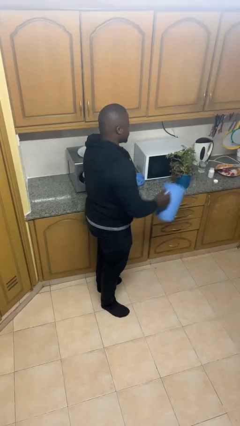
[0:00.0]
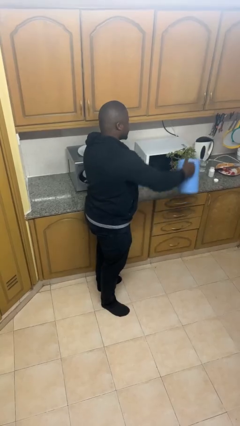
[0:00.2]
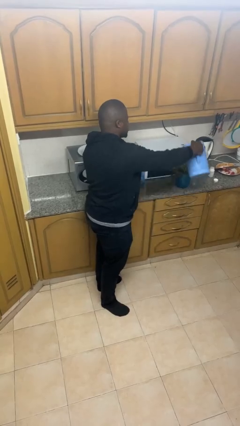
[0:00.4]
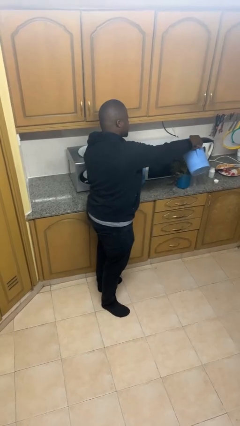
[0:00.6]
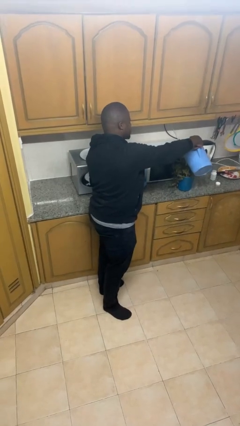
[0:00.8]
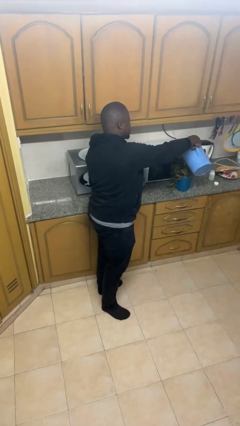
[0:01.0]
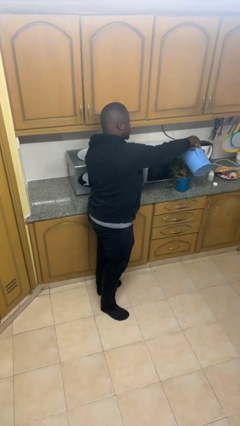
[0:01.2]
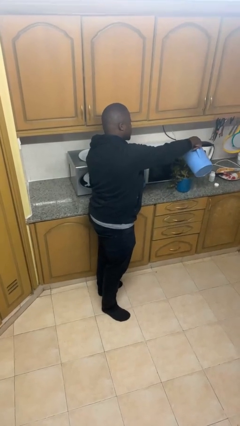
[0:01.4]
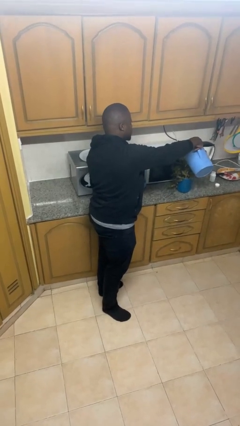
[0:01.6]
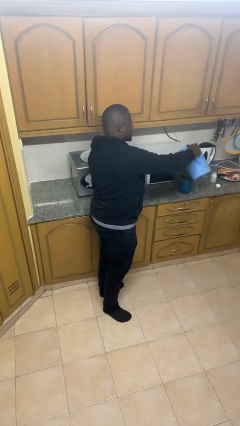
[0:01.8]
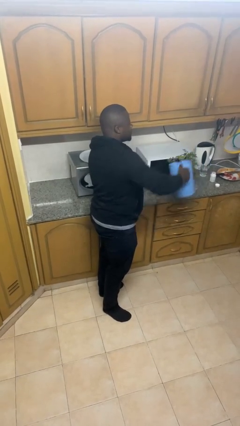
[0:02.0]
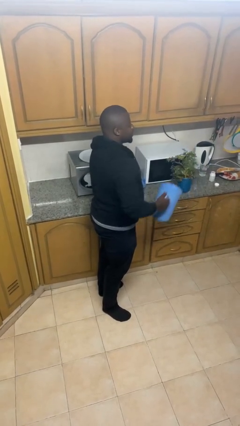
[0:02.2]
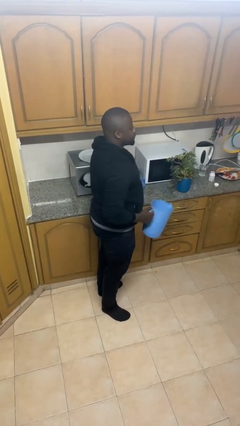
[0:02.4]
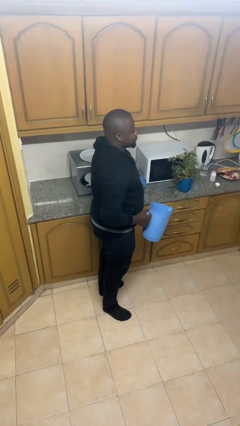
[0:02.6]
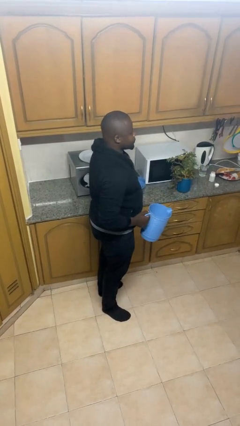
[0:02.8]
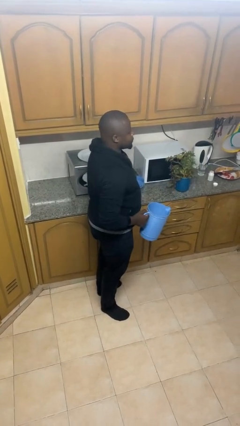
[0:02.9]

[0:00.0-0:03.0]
person waters houseplant

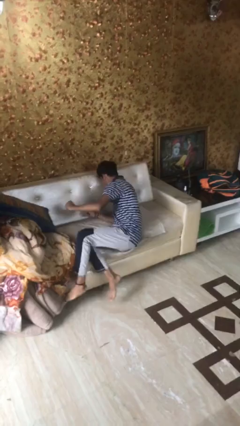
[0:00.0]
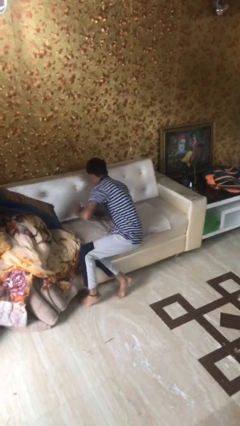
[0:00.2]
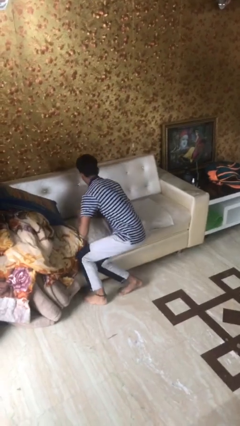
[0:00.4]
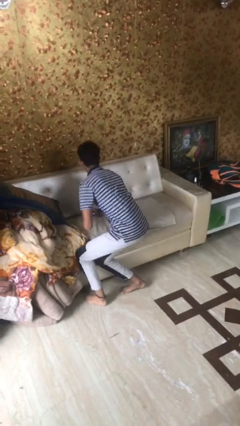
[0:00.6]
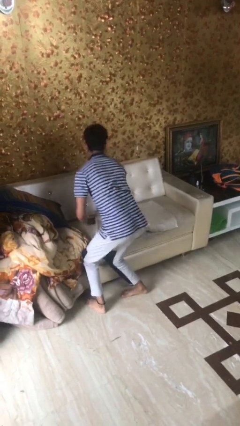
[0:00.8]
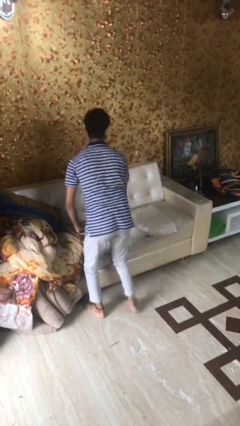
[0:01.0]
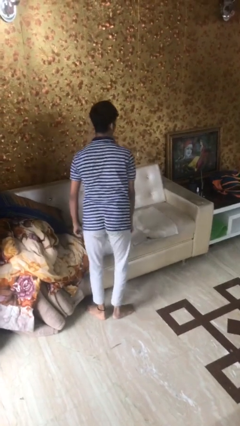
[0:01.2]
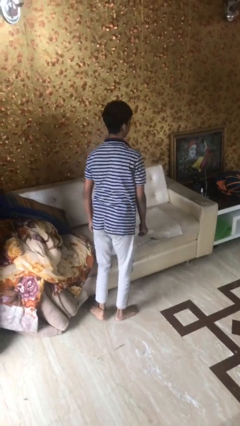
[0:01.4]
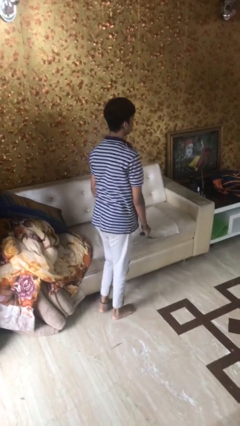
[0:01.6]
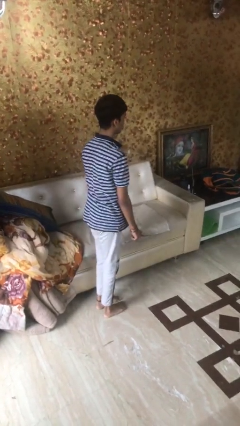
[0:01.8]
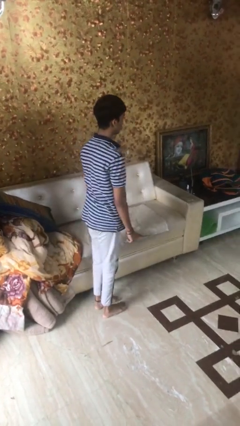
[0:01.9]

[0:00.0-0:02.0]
person stands up

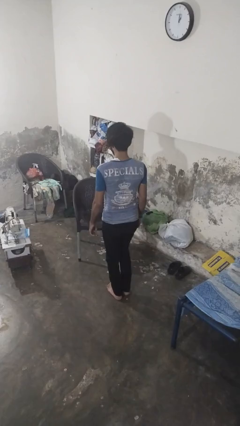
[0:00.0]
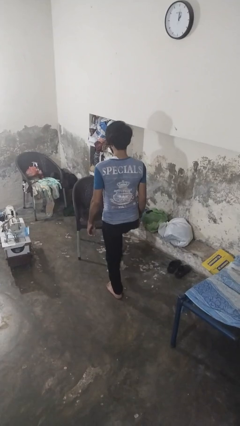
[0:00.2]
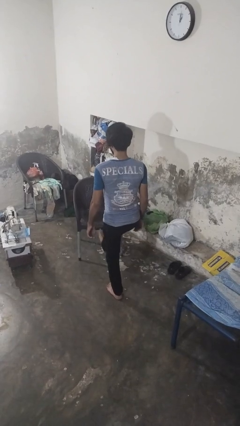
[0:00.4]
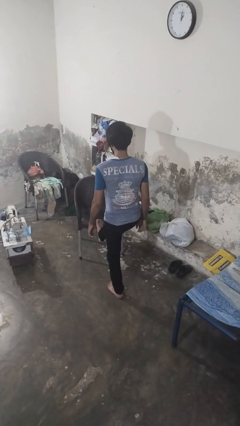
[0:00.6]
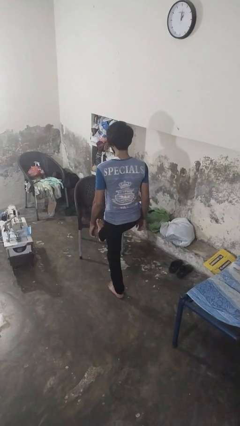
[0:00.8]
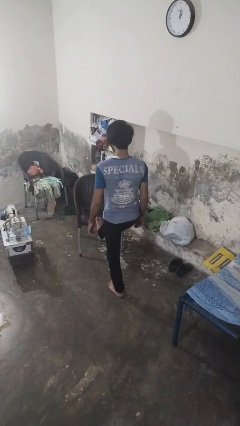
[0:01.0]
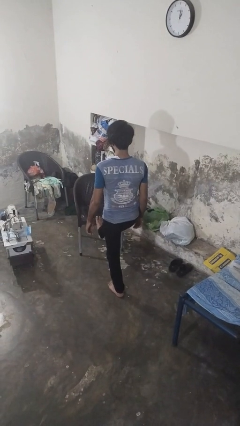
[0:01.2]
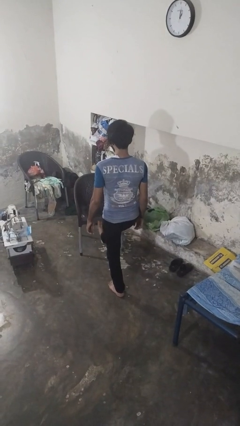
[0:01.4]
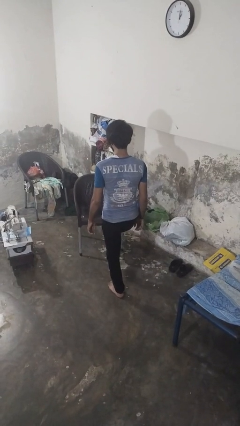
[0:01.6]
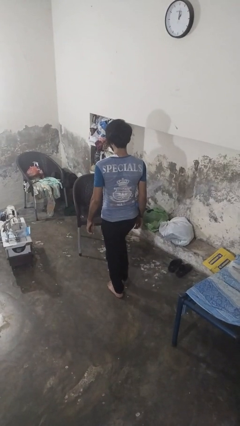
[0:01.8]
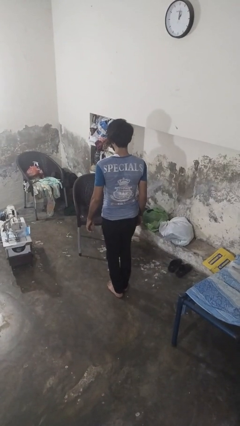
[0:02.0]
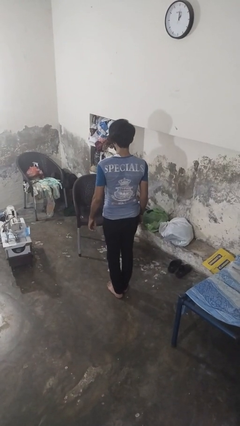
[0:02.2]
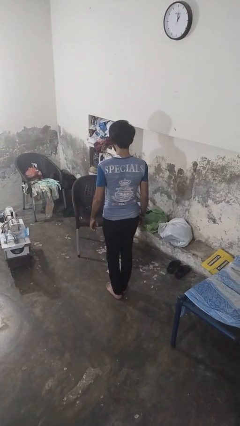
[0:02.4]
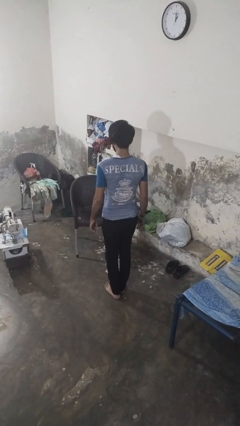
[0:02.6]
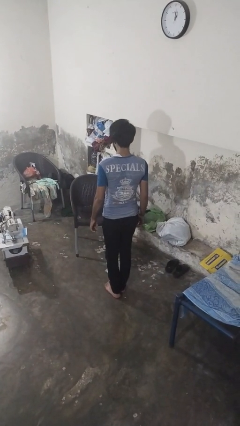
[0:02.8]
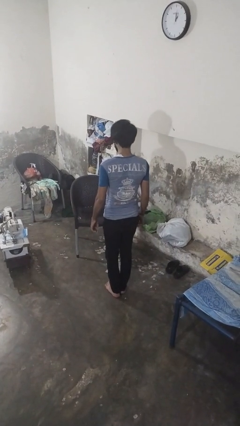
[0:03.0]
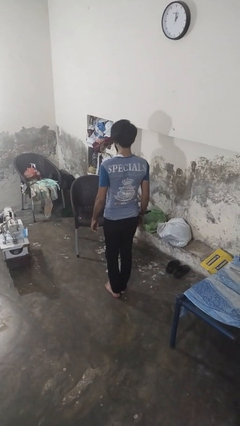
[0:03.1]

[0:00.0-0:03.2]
person stubs toe

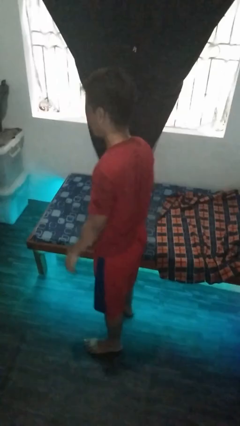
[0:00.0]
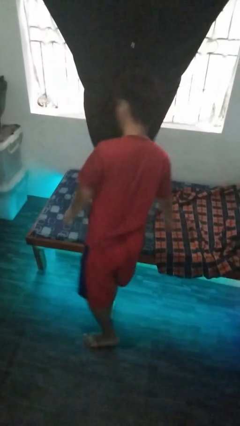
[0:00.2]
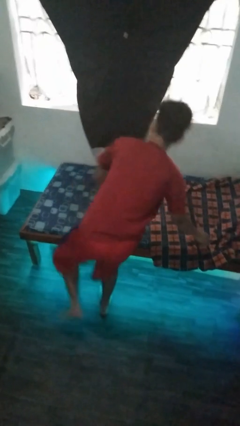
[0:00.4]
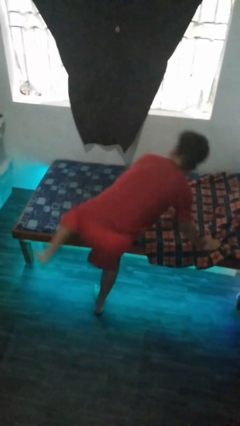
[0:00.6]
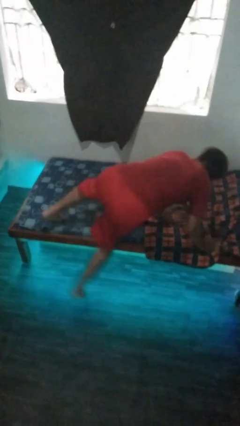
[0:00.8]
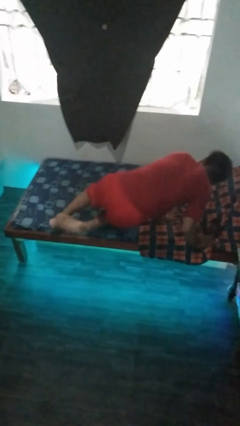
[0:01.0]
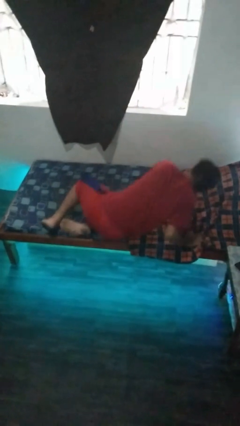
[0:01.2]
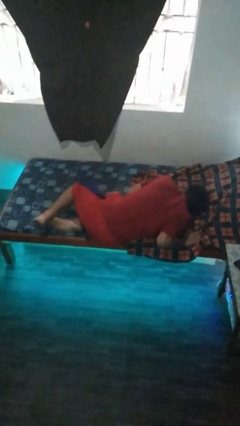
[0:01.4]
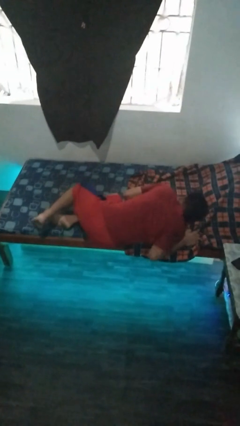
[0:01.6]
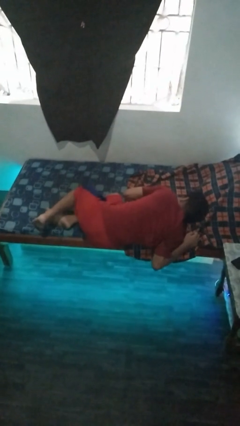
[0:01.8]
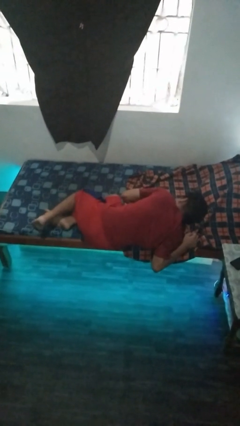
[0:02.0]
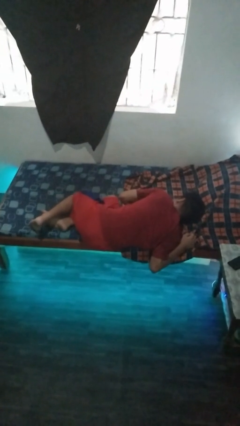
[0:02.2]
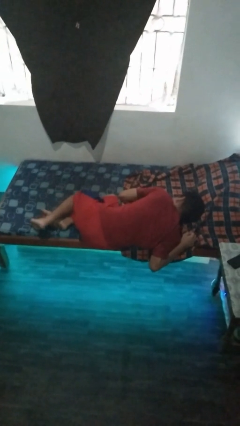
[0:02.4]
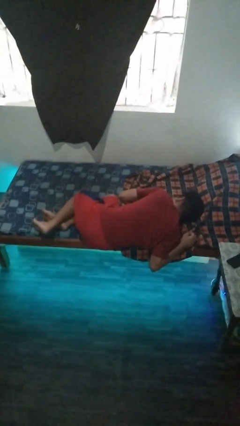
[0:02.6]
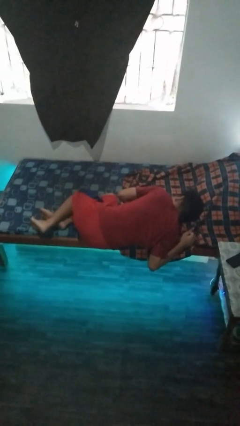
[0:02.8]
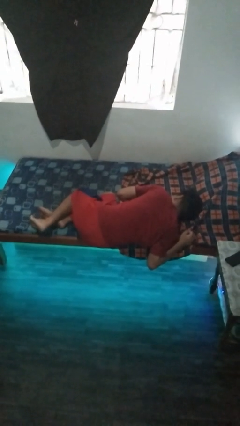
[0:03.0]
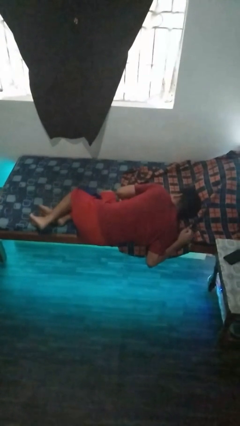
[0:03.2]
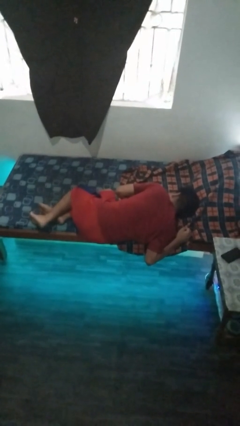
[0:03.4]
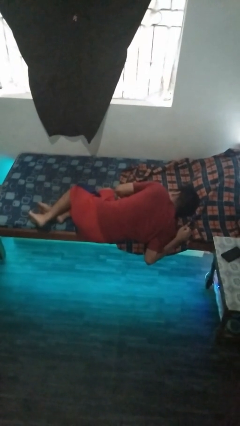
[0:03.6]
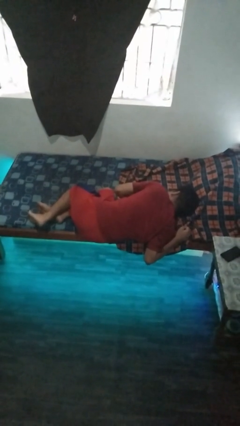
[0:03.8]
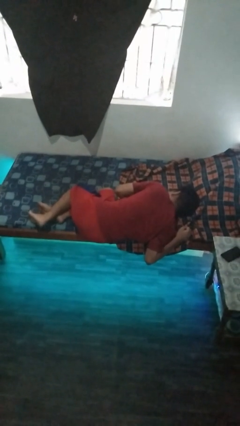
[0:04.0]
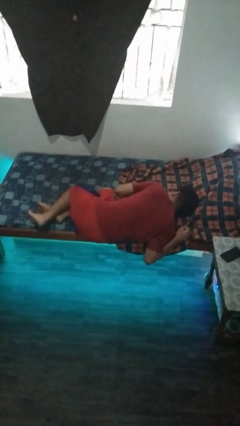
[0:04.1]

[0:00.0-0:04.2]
person lies down on bed

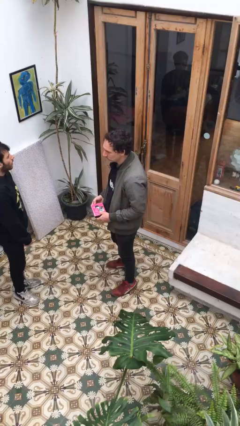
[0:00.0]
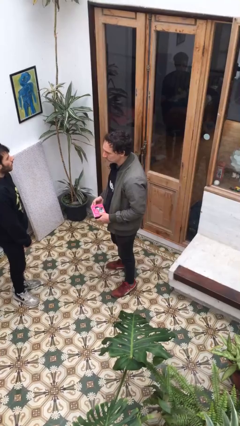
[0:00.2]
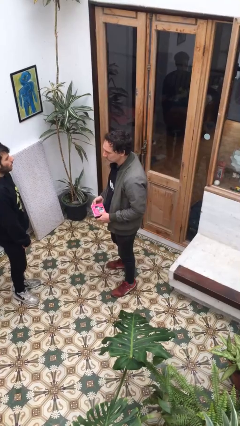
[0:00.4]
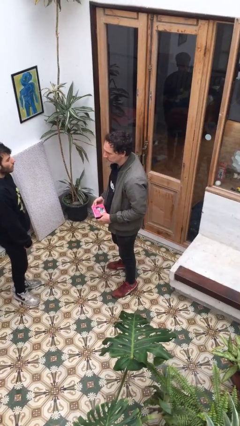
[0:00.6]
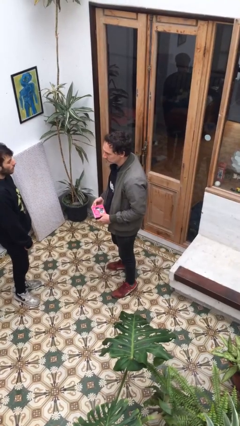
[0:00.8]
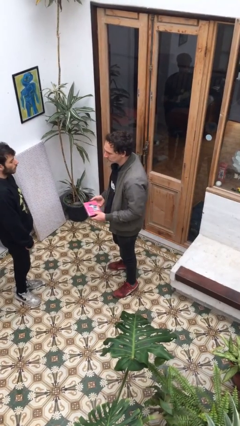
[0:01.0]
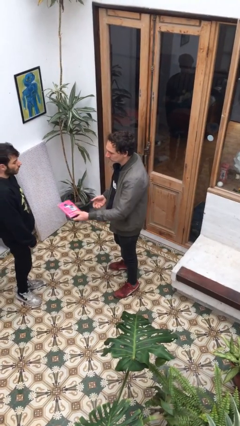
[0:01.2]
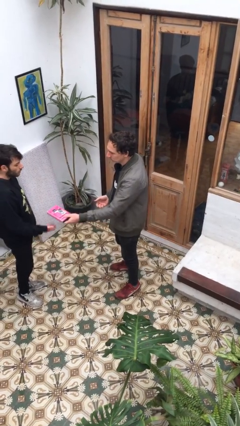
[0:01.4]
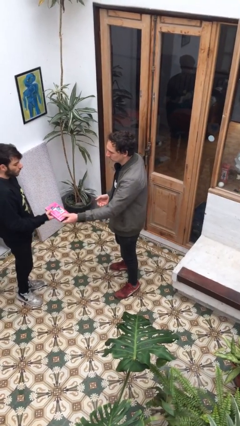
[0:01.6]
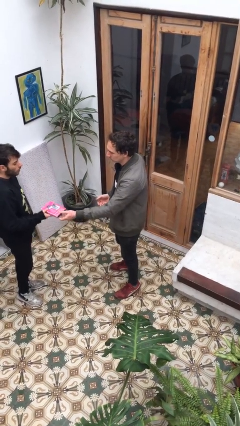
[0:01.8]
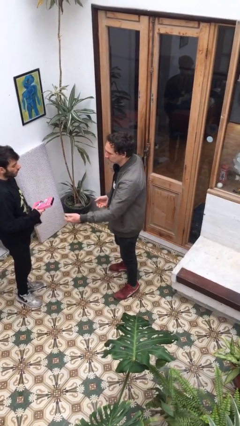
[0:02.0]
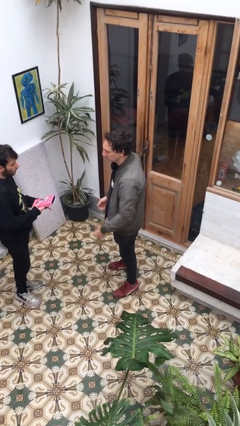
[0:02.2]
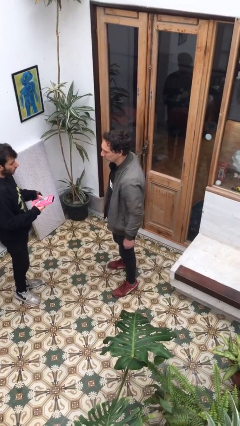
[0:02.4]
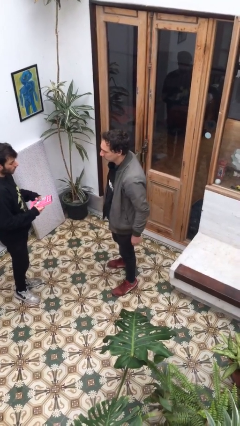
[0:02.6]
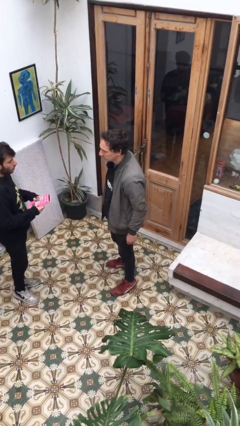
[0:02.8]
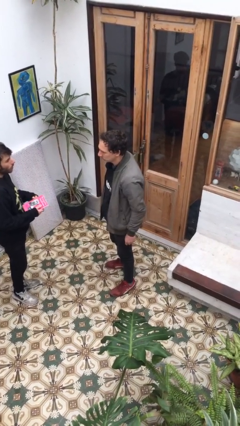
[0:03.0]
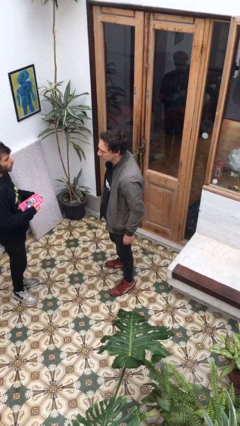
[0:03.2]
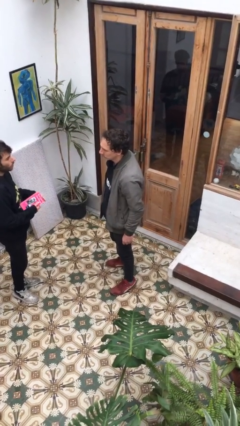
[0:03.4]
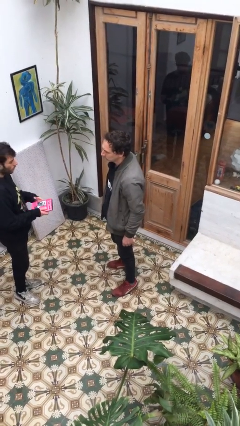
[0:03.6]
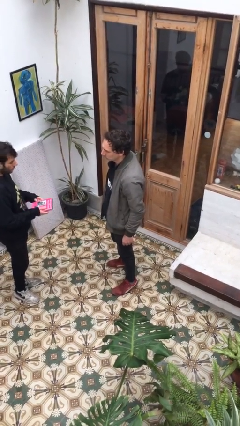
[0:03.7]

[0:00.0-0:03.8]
person transfers object to person

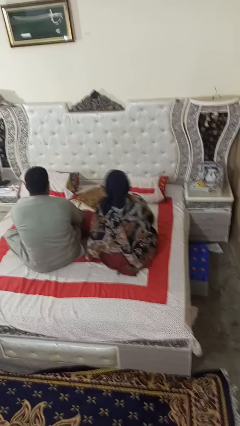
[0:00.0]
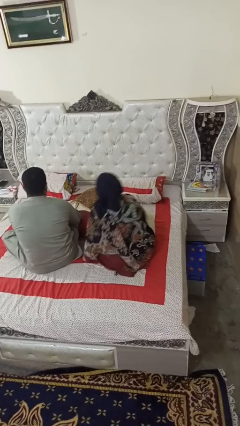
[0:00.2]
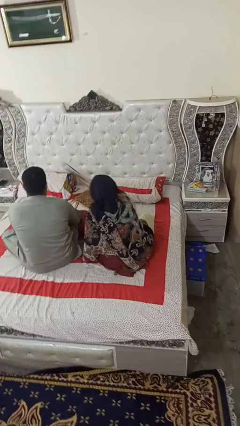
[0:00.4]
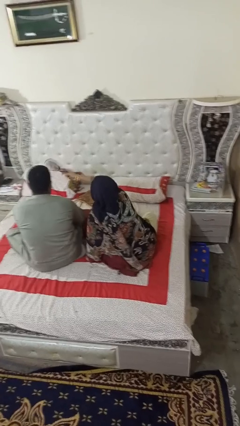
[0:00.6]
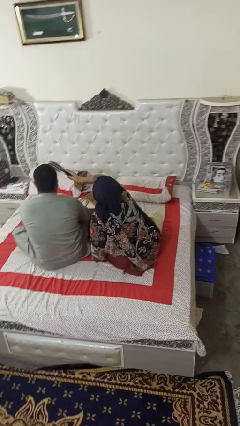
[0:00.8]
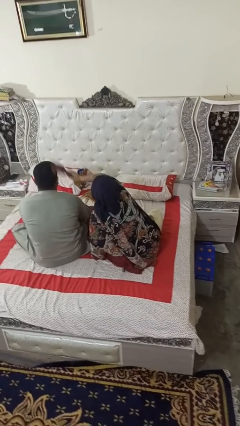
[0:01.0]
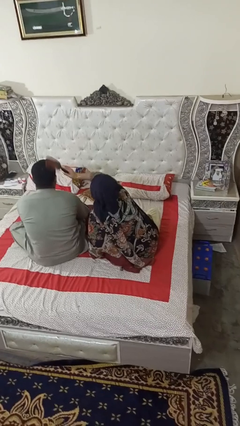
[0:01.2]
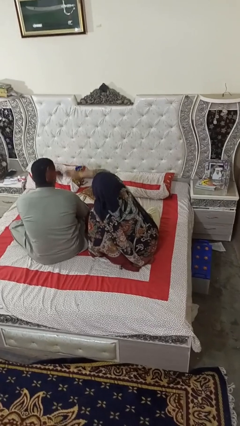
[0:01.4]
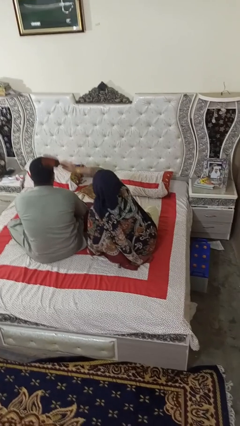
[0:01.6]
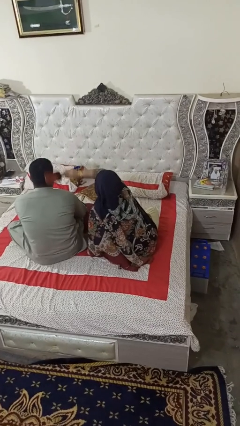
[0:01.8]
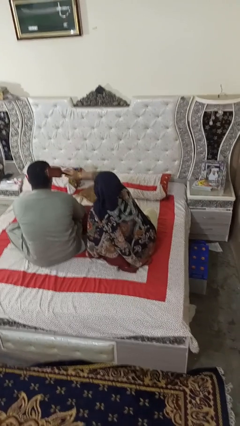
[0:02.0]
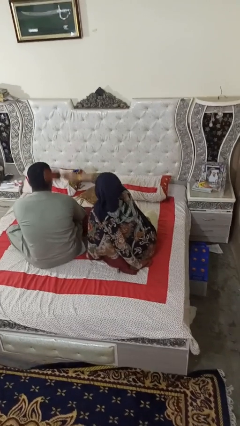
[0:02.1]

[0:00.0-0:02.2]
person brushes hair of person
